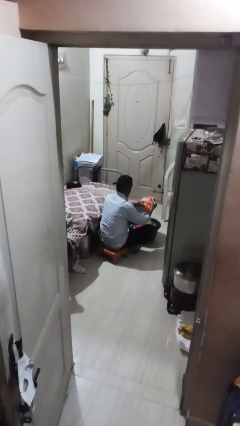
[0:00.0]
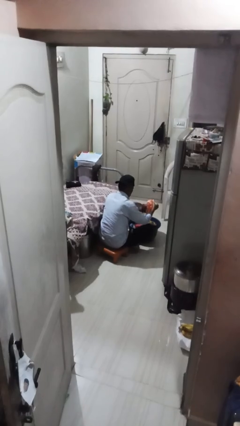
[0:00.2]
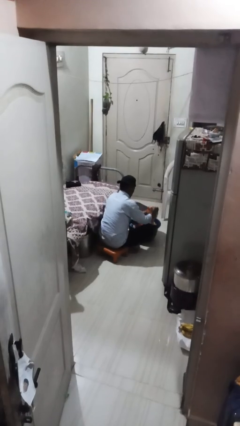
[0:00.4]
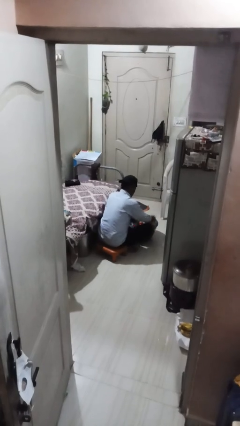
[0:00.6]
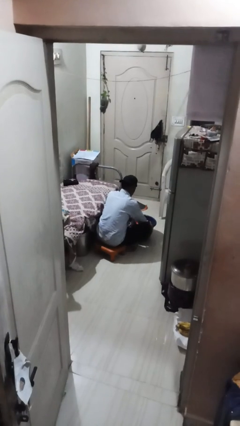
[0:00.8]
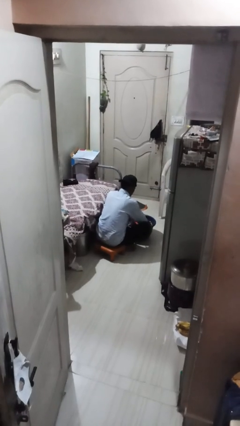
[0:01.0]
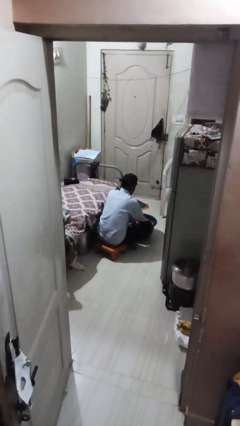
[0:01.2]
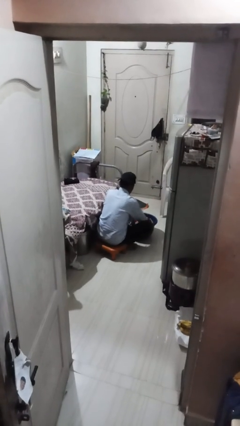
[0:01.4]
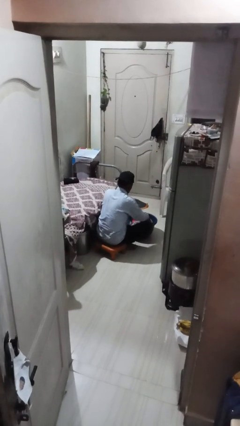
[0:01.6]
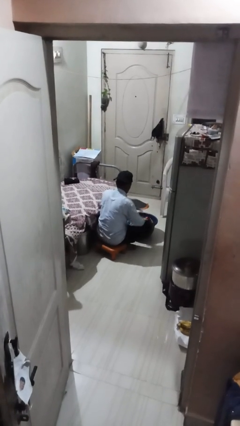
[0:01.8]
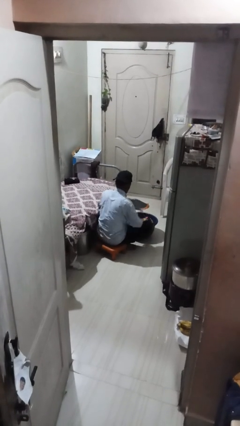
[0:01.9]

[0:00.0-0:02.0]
person puts object into basket

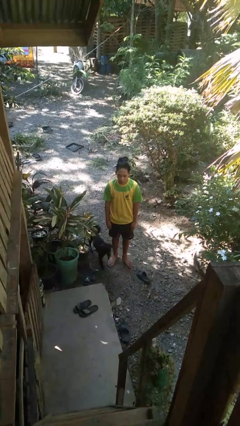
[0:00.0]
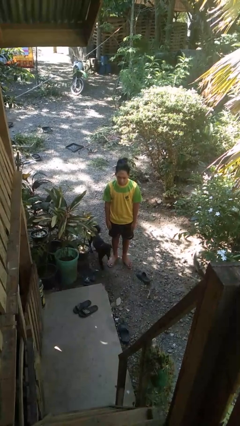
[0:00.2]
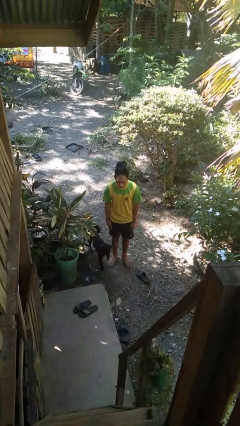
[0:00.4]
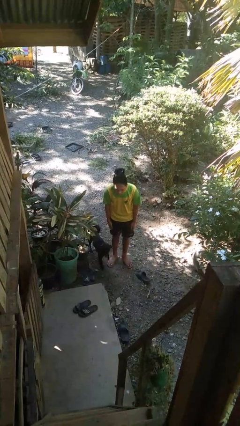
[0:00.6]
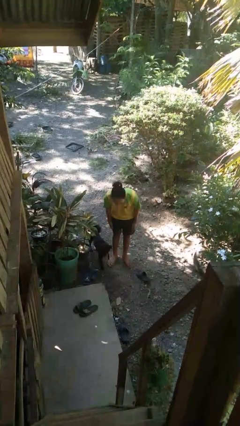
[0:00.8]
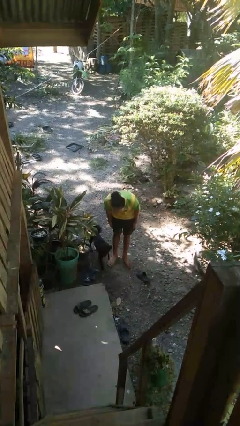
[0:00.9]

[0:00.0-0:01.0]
person bows

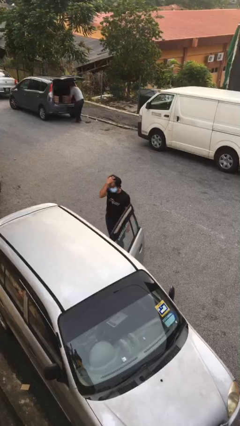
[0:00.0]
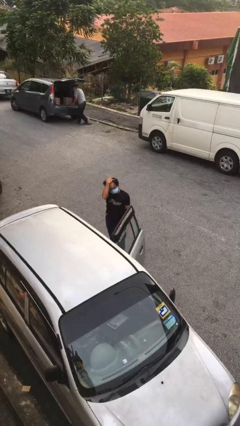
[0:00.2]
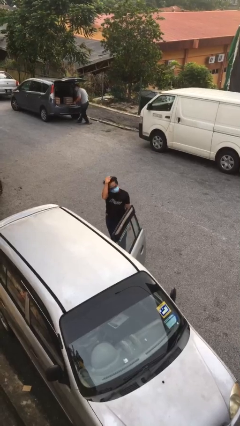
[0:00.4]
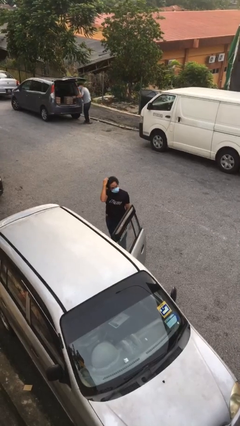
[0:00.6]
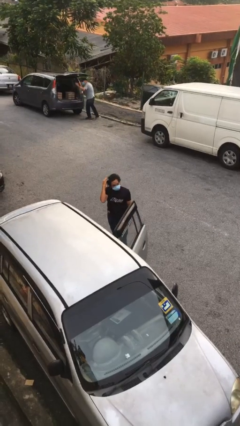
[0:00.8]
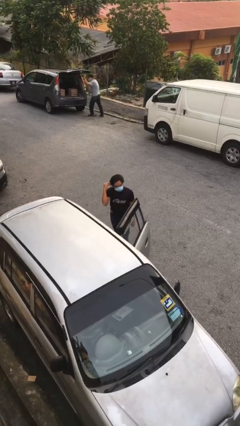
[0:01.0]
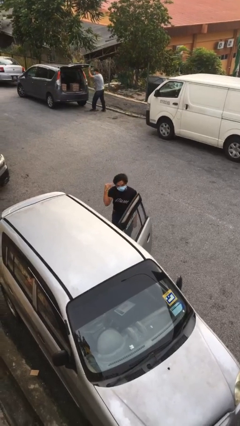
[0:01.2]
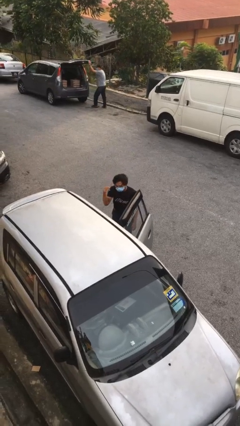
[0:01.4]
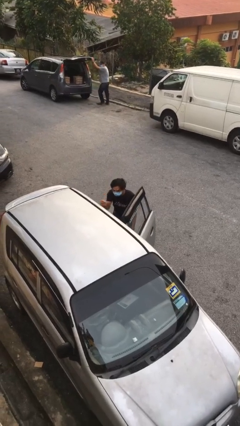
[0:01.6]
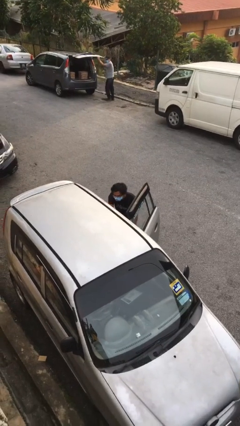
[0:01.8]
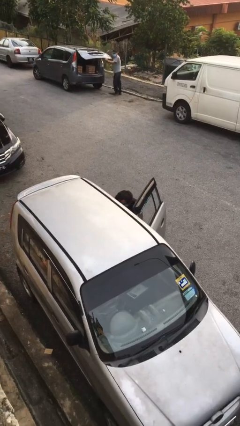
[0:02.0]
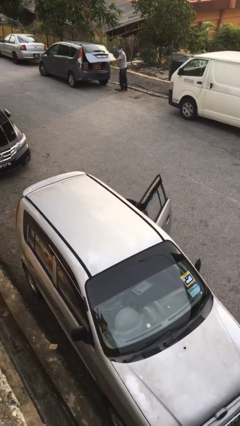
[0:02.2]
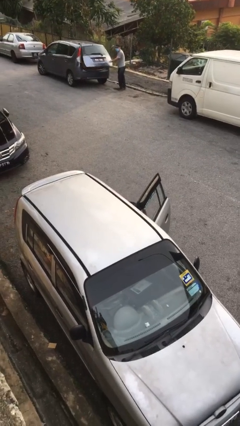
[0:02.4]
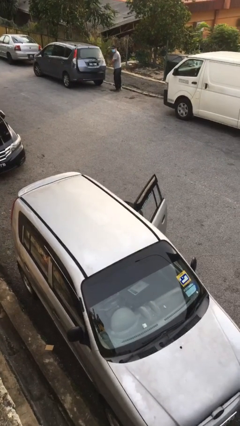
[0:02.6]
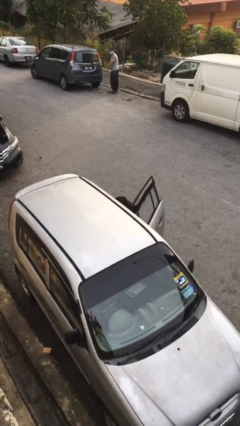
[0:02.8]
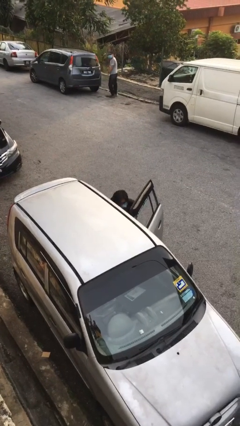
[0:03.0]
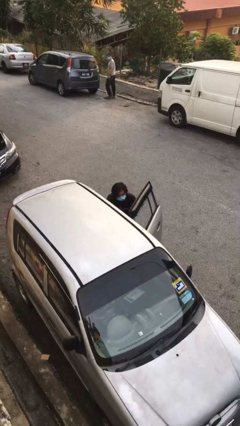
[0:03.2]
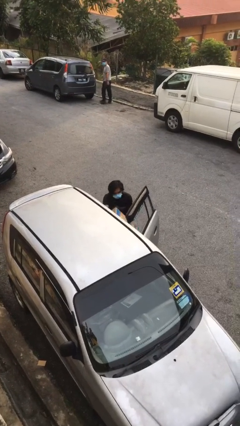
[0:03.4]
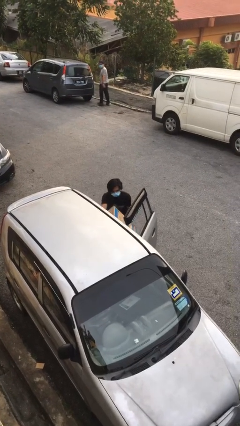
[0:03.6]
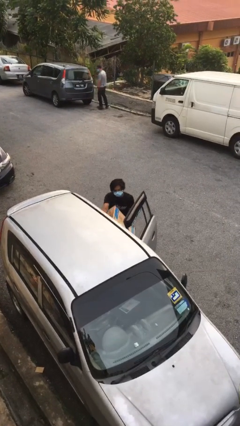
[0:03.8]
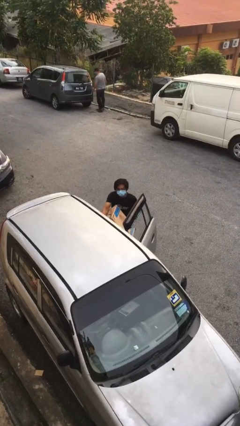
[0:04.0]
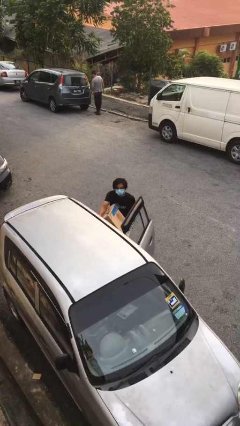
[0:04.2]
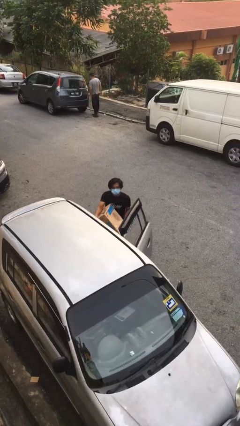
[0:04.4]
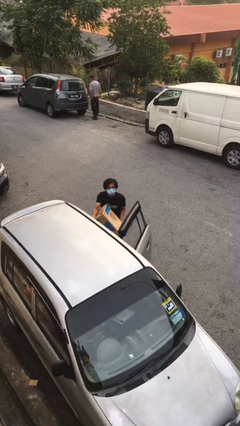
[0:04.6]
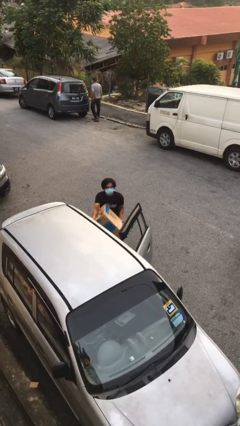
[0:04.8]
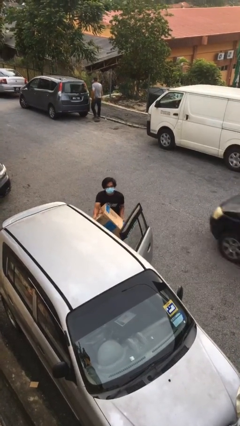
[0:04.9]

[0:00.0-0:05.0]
person unloads car

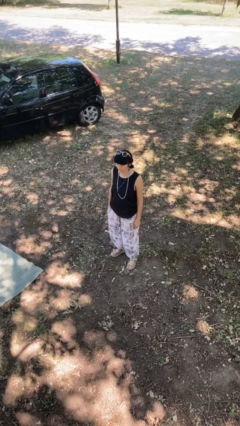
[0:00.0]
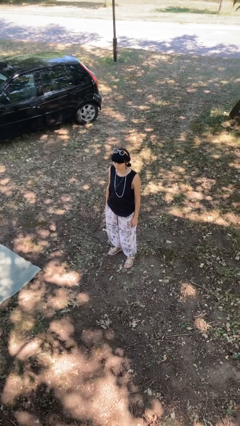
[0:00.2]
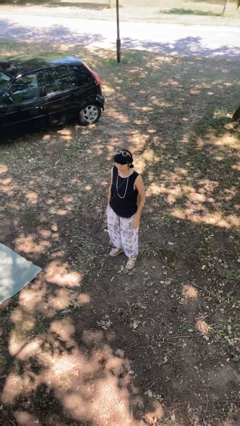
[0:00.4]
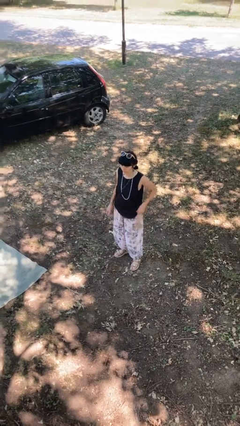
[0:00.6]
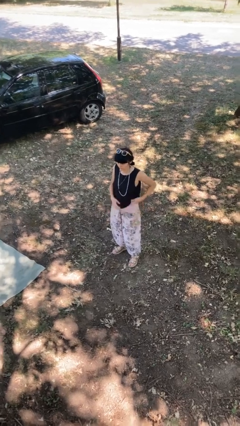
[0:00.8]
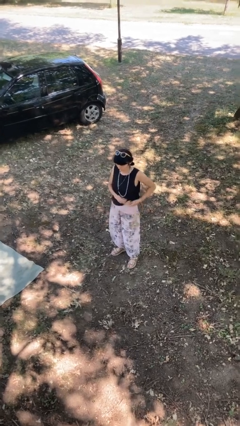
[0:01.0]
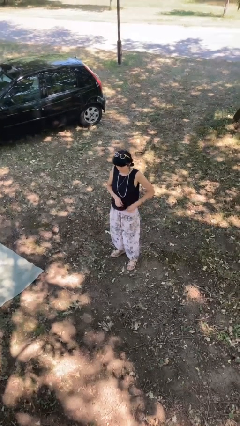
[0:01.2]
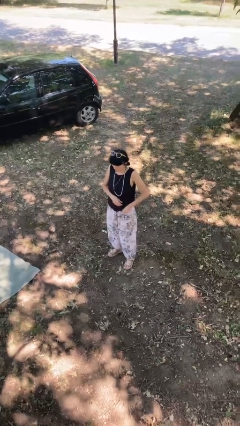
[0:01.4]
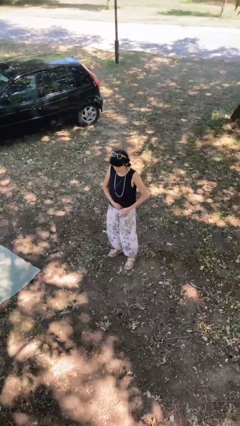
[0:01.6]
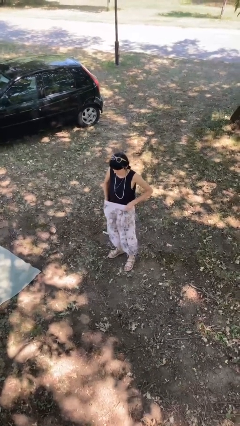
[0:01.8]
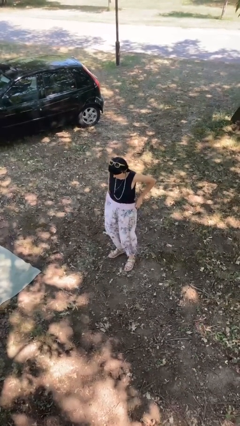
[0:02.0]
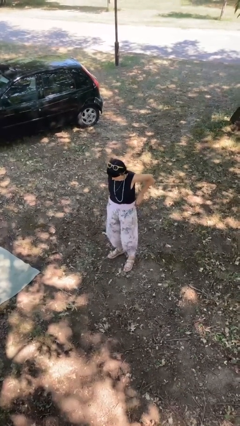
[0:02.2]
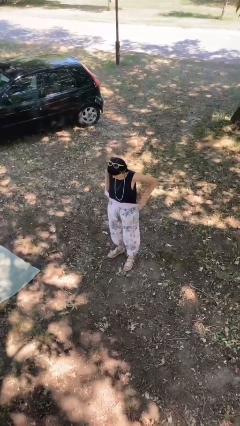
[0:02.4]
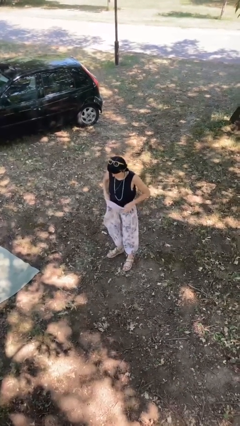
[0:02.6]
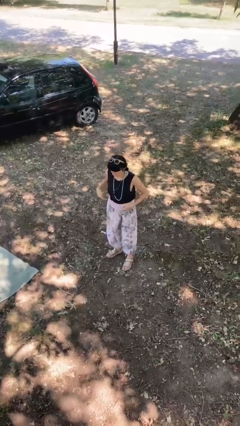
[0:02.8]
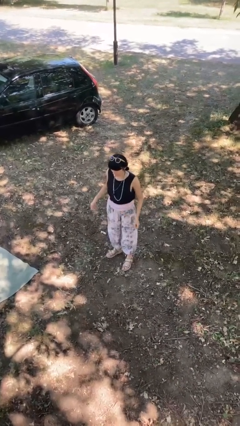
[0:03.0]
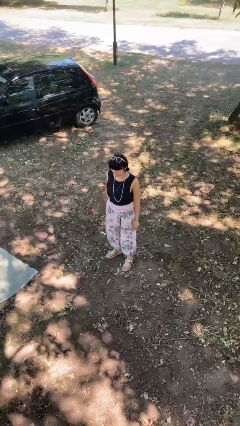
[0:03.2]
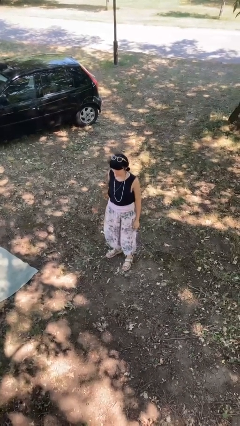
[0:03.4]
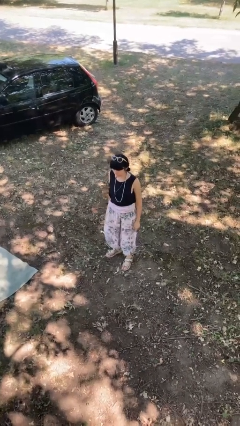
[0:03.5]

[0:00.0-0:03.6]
person tucks in shirt

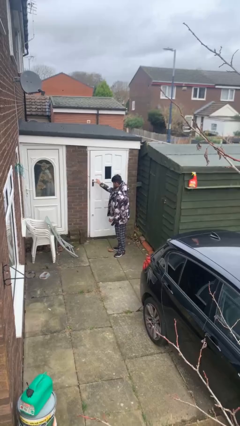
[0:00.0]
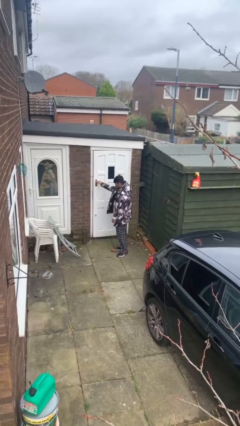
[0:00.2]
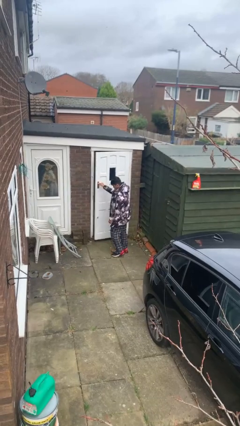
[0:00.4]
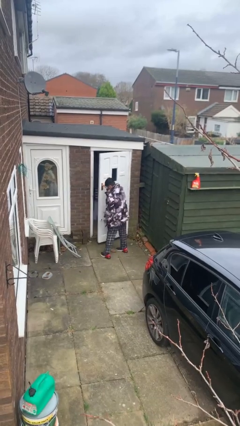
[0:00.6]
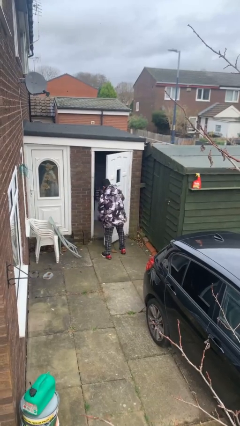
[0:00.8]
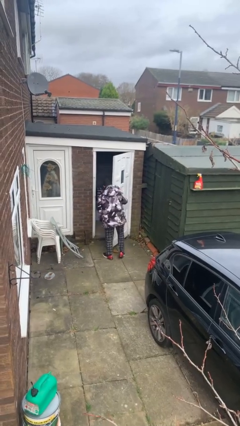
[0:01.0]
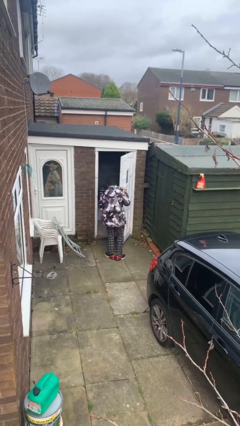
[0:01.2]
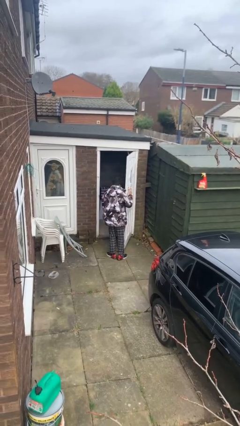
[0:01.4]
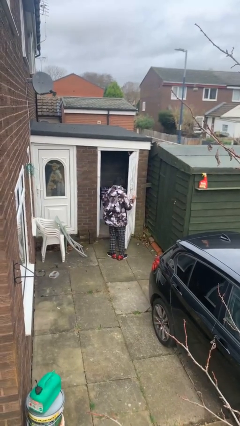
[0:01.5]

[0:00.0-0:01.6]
person opens facility door

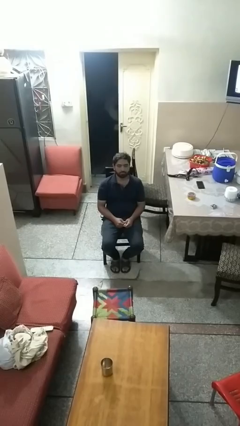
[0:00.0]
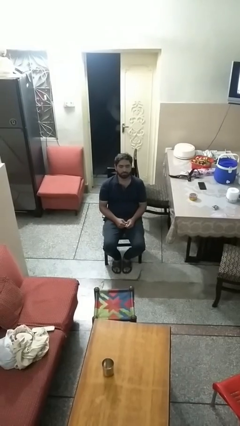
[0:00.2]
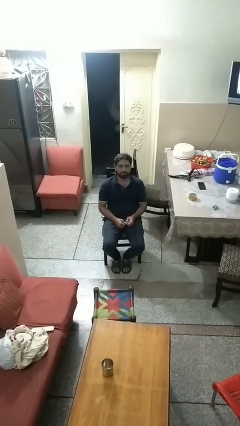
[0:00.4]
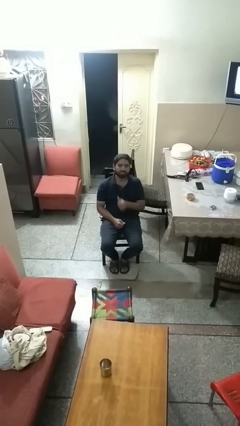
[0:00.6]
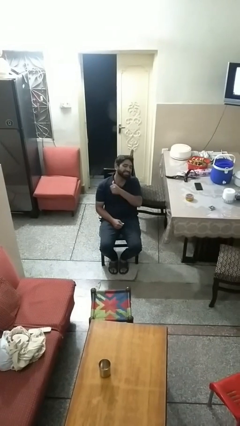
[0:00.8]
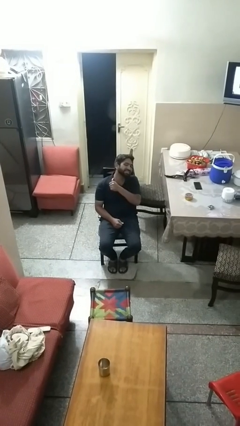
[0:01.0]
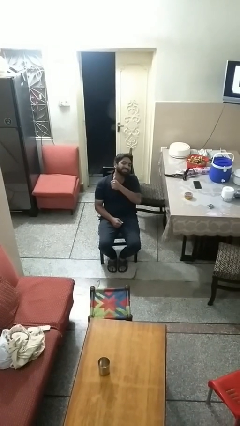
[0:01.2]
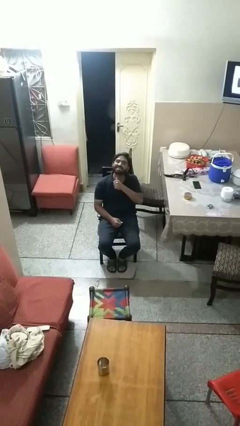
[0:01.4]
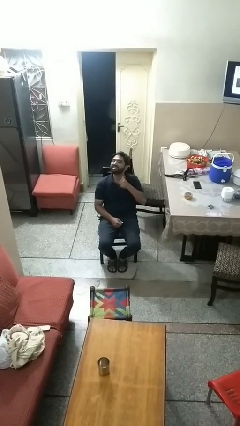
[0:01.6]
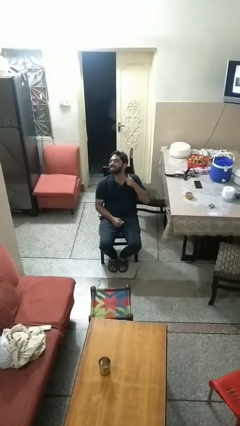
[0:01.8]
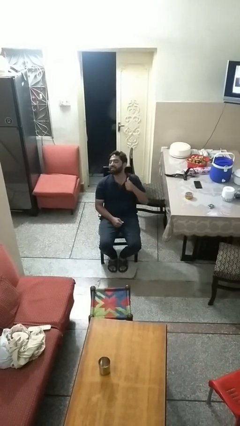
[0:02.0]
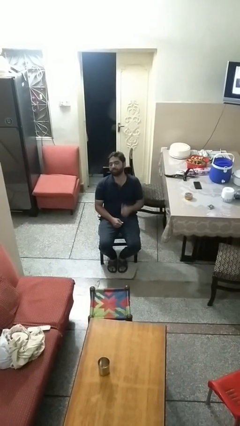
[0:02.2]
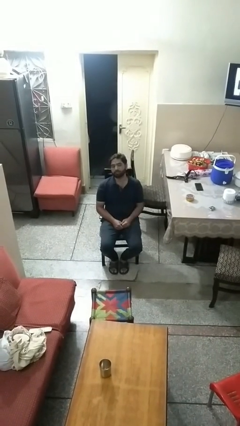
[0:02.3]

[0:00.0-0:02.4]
person gestures cut

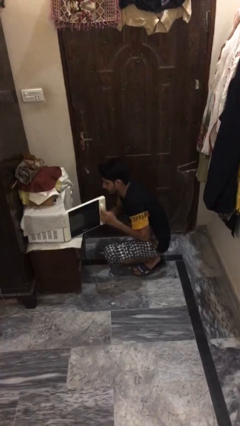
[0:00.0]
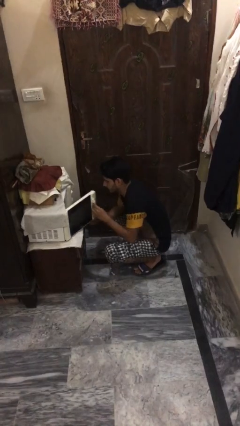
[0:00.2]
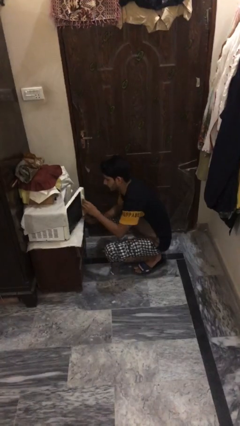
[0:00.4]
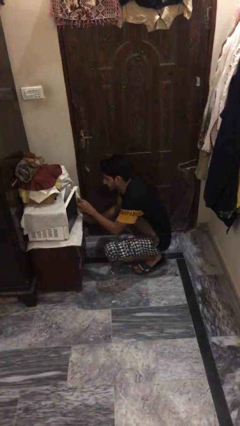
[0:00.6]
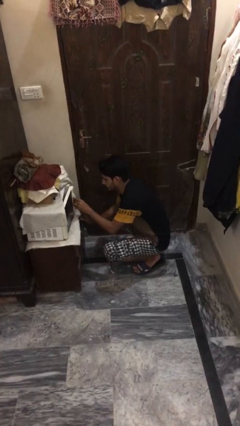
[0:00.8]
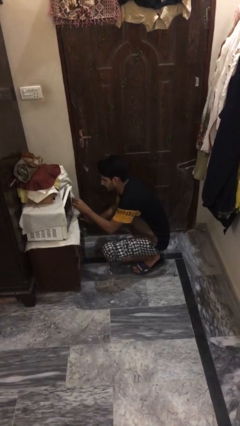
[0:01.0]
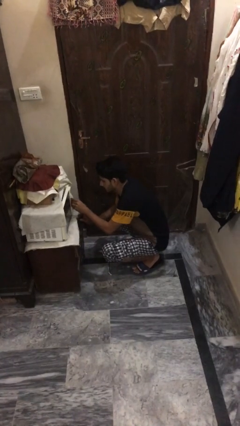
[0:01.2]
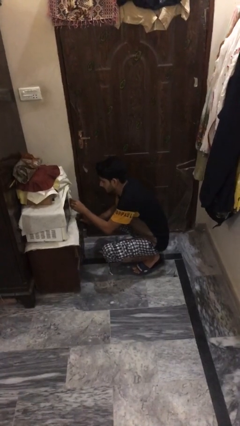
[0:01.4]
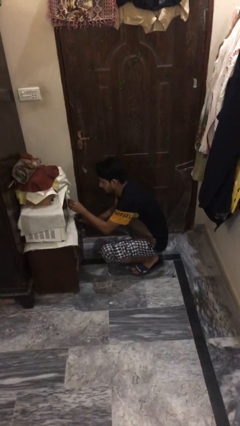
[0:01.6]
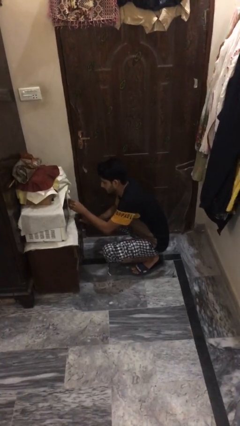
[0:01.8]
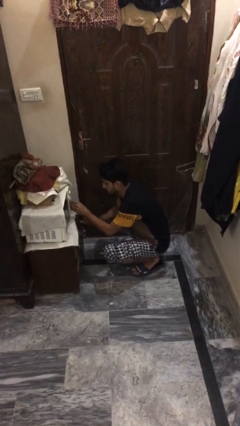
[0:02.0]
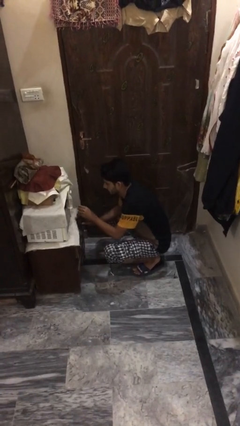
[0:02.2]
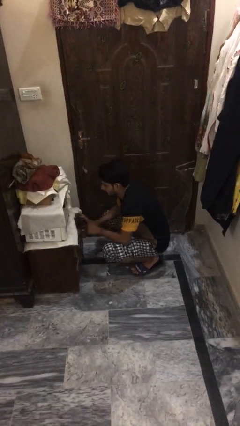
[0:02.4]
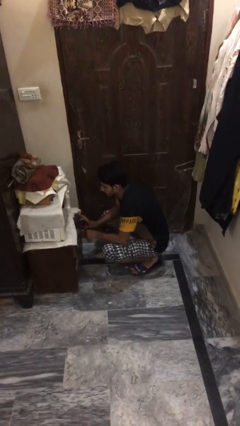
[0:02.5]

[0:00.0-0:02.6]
person closes microwave
